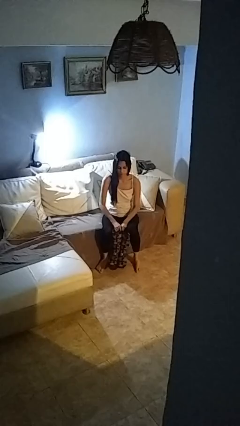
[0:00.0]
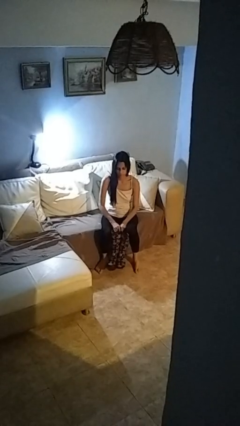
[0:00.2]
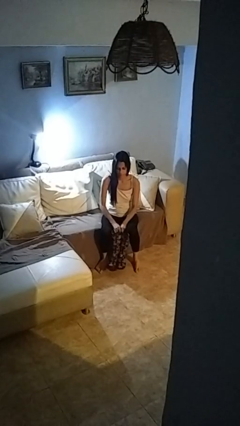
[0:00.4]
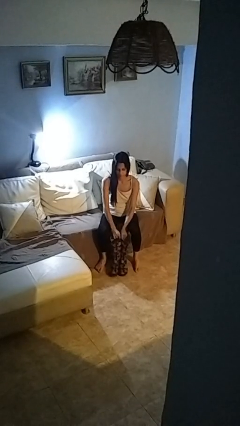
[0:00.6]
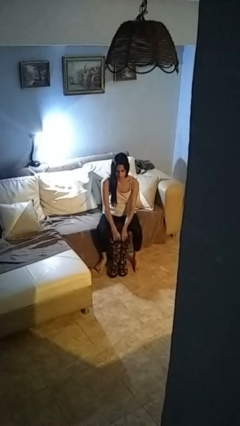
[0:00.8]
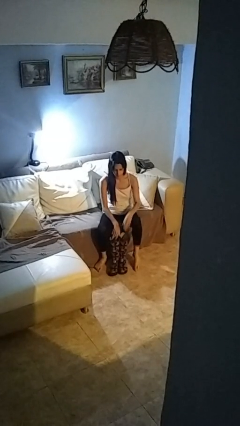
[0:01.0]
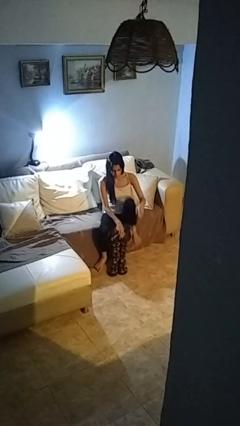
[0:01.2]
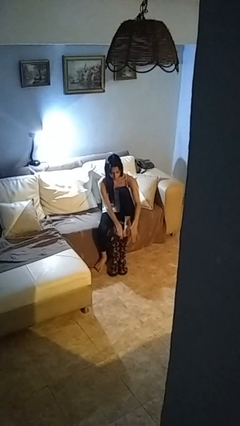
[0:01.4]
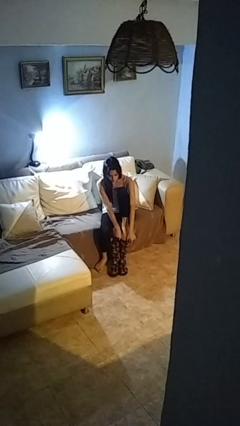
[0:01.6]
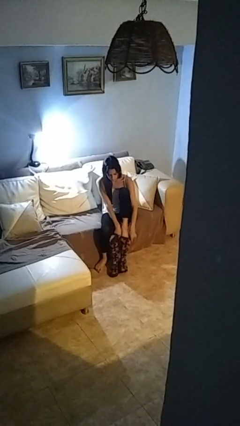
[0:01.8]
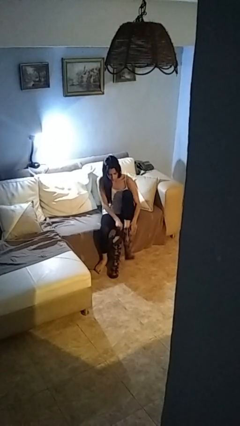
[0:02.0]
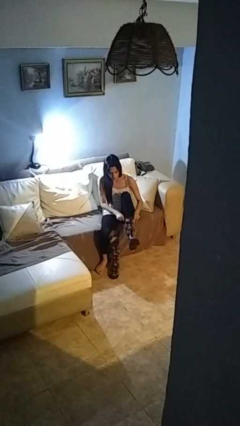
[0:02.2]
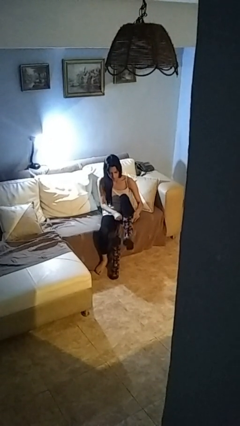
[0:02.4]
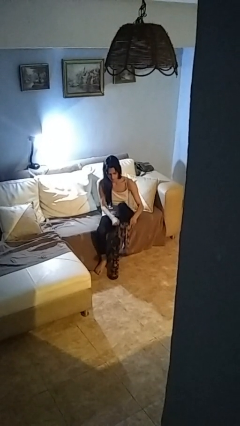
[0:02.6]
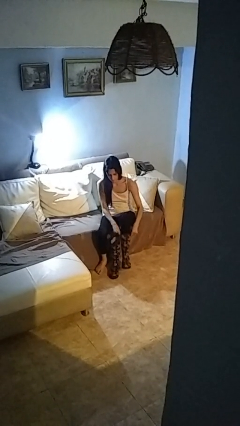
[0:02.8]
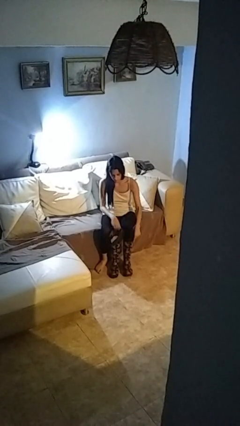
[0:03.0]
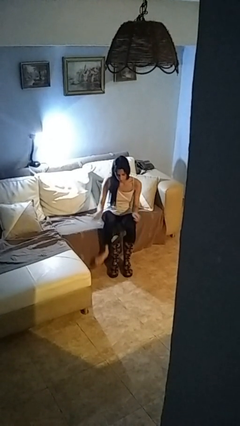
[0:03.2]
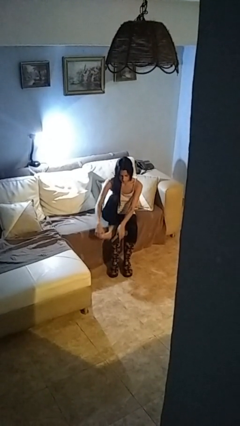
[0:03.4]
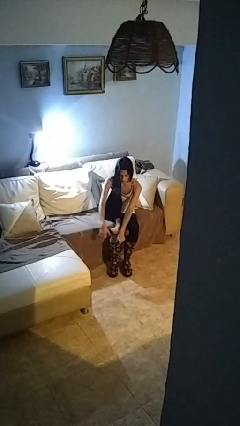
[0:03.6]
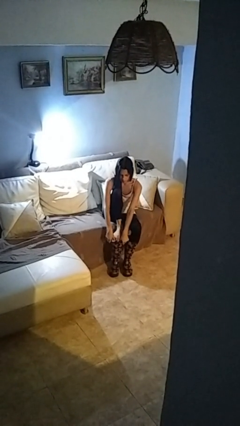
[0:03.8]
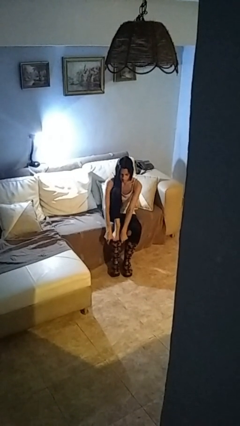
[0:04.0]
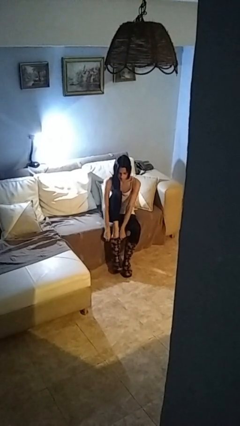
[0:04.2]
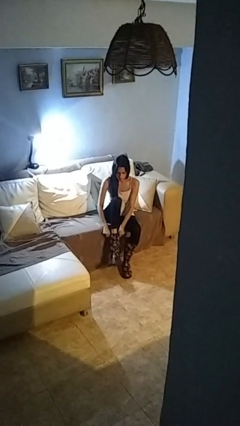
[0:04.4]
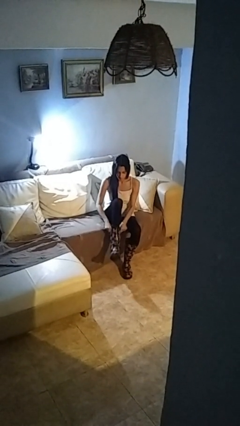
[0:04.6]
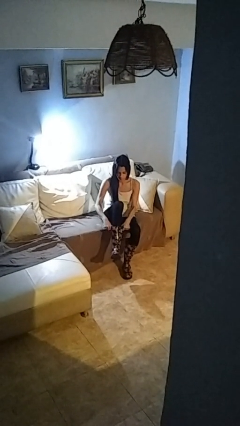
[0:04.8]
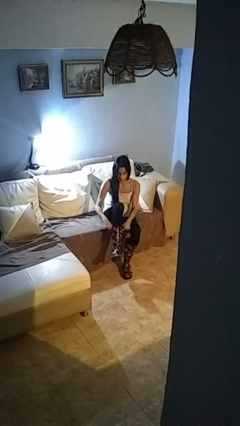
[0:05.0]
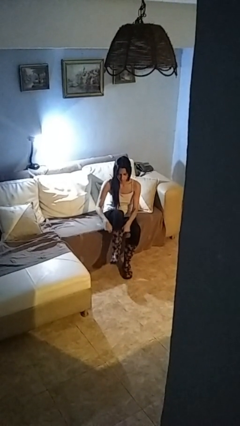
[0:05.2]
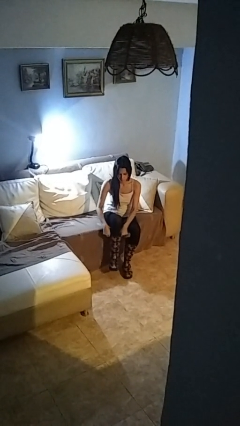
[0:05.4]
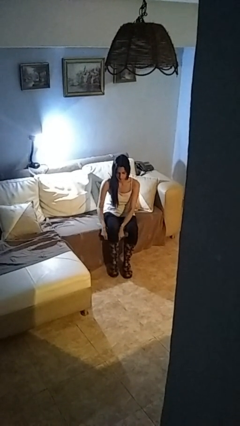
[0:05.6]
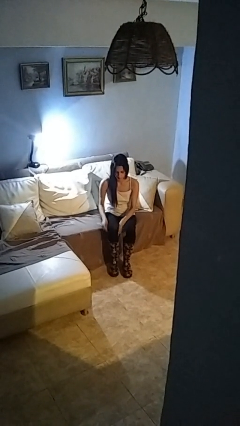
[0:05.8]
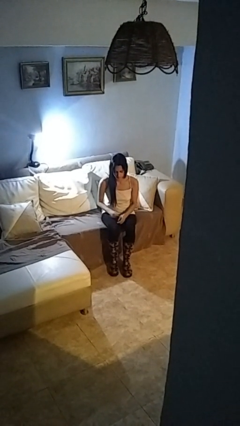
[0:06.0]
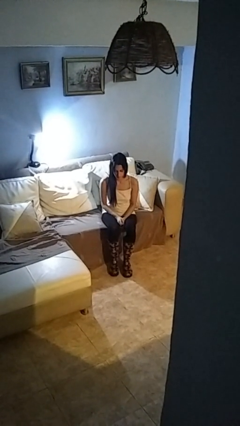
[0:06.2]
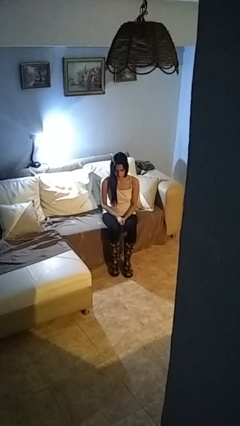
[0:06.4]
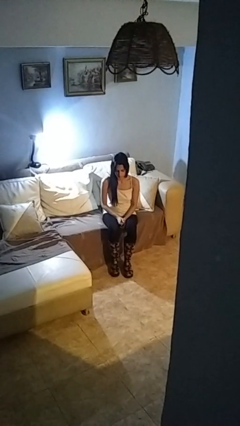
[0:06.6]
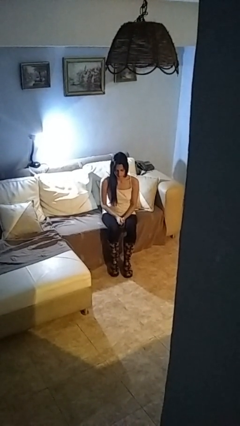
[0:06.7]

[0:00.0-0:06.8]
person puts on boots

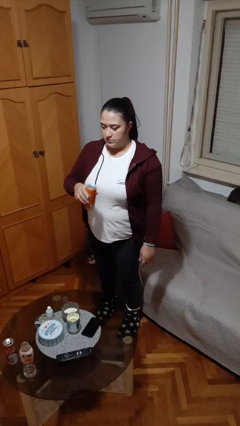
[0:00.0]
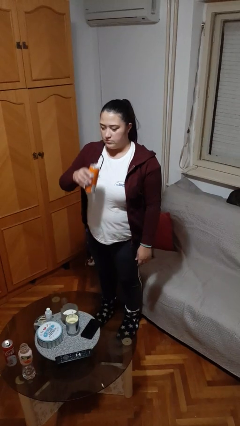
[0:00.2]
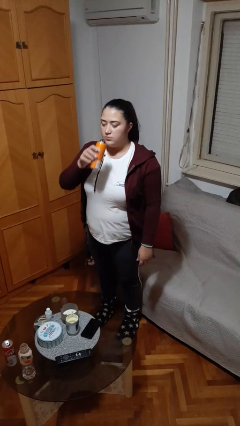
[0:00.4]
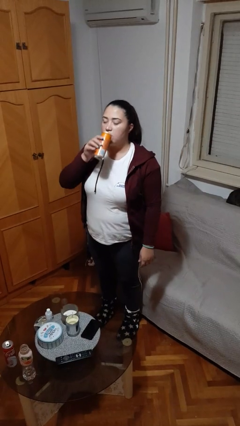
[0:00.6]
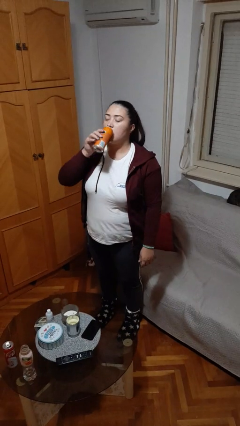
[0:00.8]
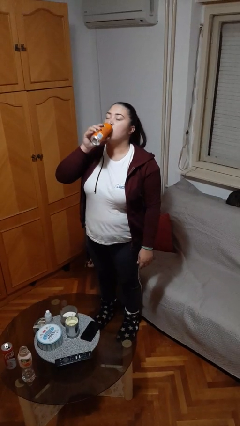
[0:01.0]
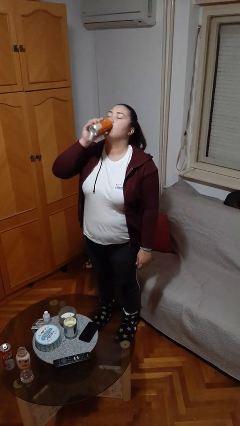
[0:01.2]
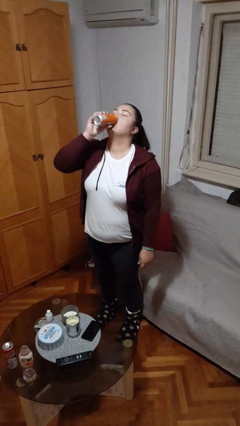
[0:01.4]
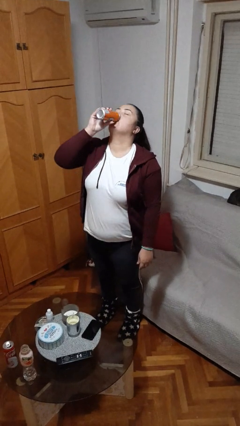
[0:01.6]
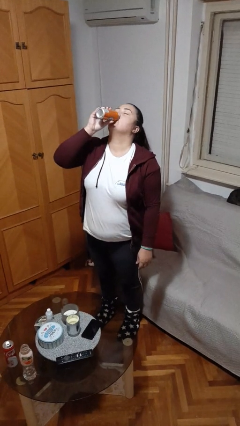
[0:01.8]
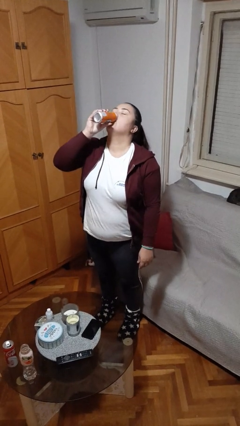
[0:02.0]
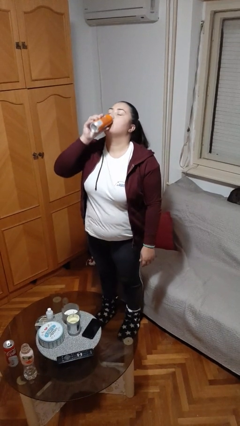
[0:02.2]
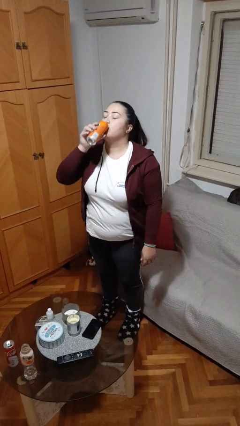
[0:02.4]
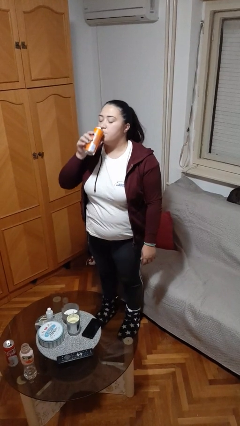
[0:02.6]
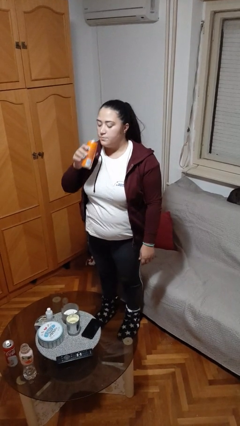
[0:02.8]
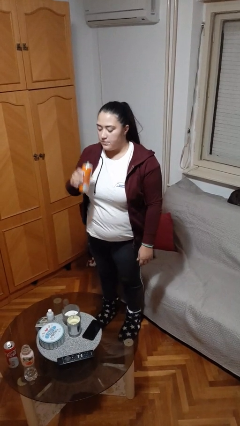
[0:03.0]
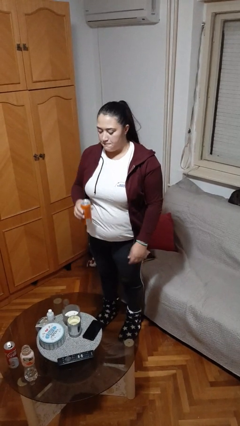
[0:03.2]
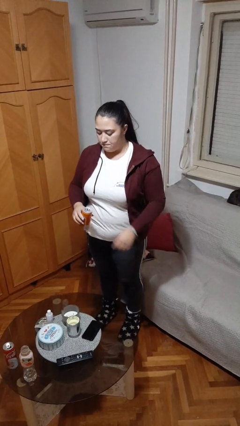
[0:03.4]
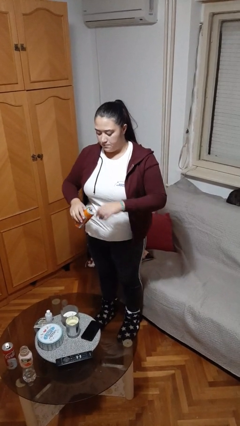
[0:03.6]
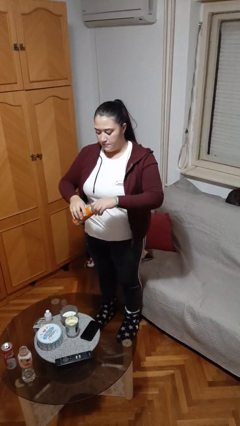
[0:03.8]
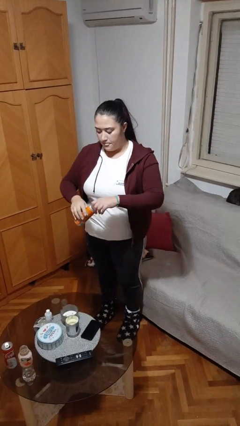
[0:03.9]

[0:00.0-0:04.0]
person drinks from beverage can

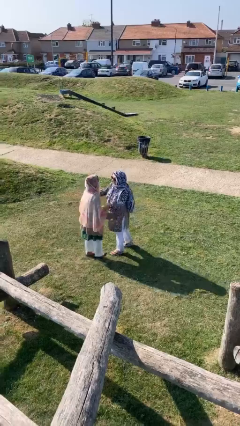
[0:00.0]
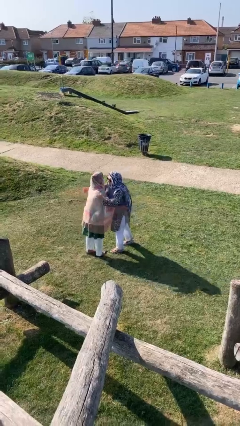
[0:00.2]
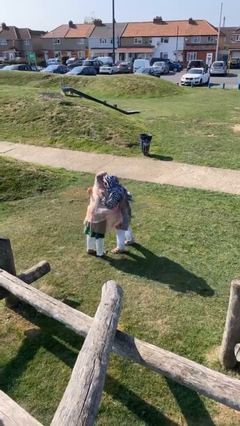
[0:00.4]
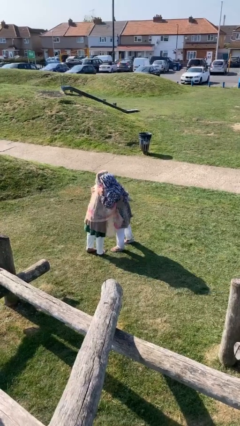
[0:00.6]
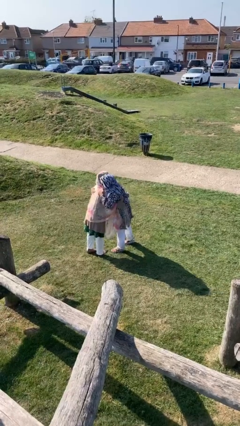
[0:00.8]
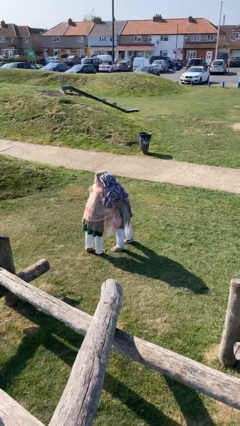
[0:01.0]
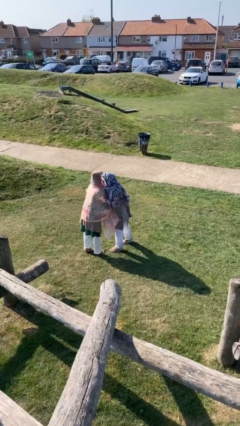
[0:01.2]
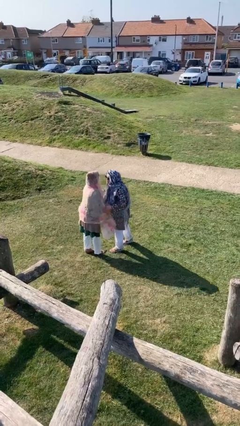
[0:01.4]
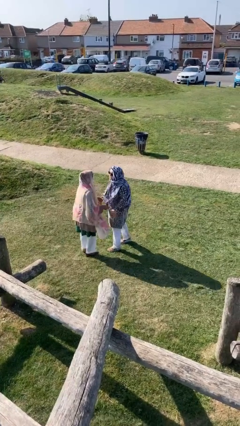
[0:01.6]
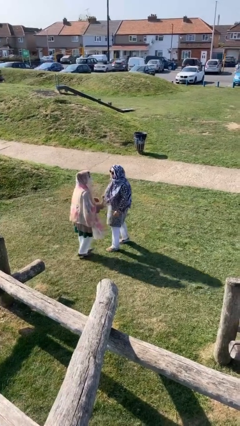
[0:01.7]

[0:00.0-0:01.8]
person embraces person

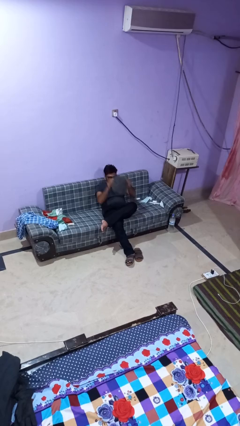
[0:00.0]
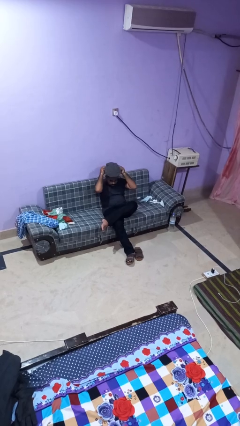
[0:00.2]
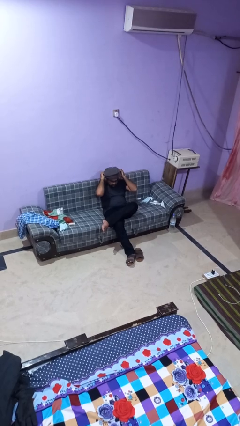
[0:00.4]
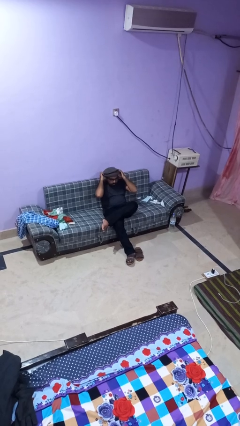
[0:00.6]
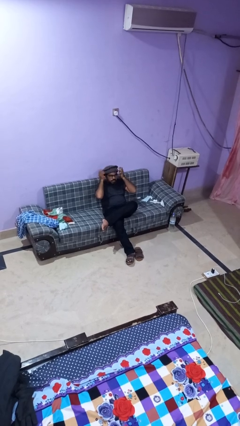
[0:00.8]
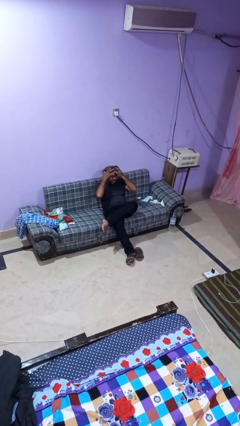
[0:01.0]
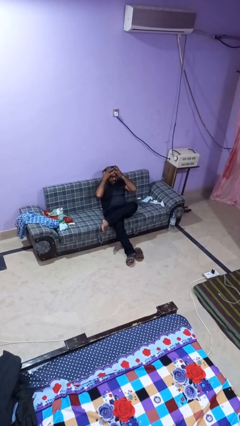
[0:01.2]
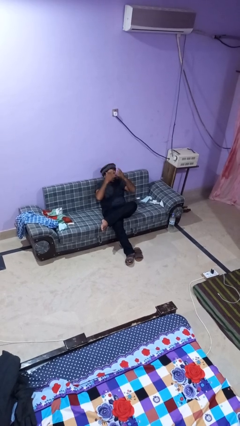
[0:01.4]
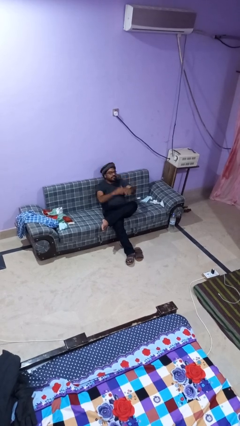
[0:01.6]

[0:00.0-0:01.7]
person puts on hat

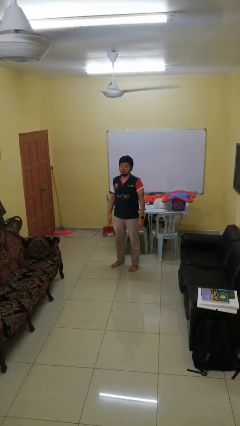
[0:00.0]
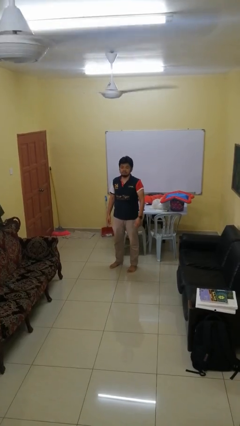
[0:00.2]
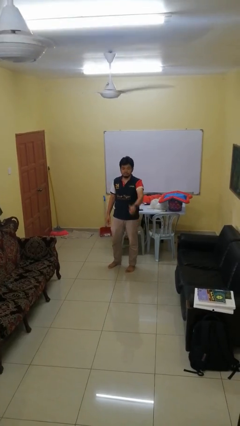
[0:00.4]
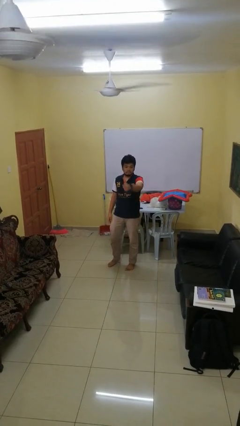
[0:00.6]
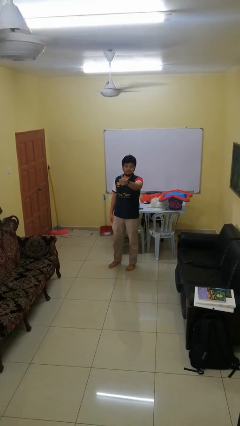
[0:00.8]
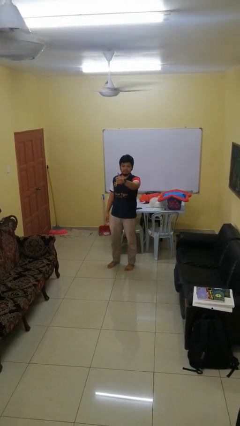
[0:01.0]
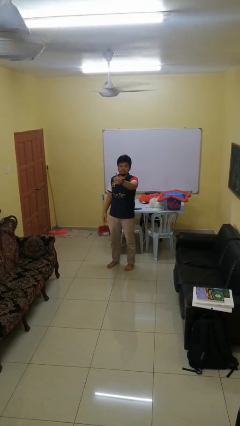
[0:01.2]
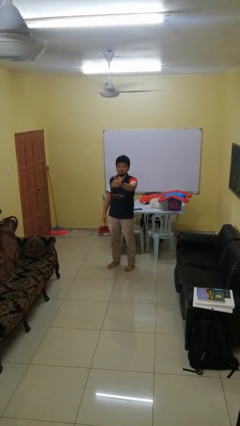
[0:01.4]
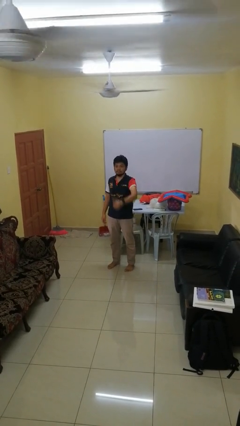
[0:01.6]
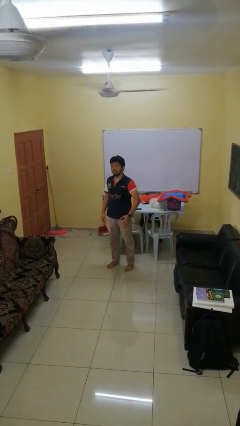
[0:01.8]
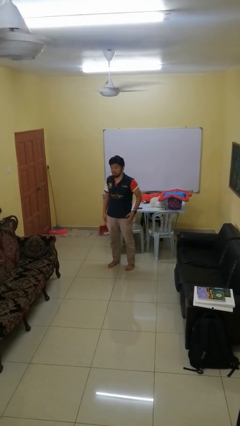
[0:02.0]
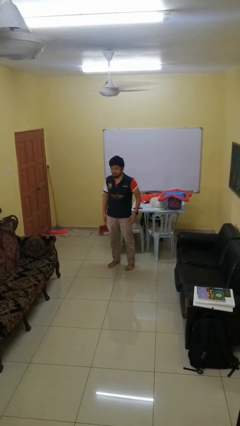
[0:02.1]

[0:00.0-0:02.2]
person gestures thumbs up

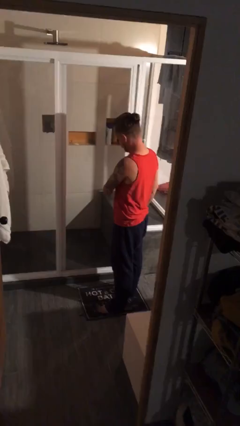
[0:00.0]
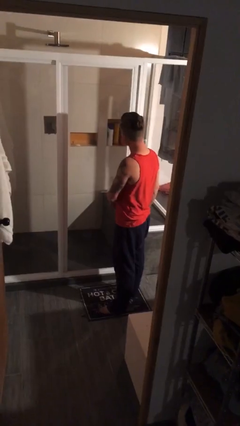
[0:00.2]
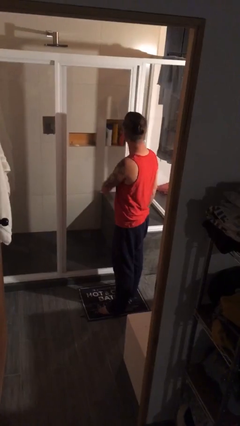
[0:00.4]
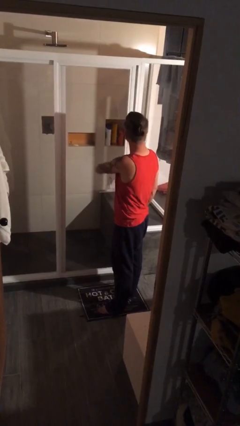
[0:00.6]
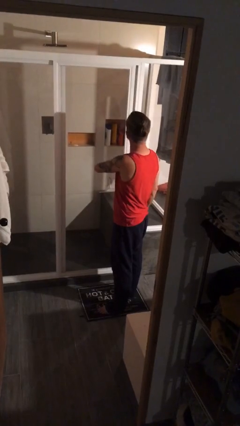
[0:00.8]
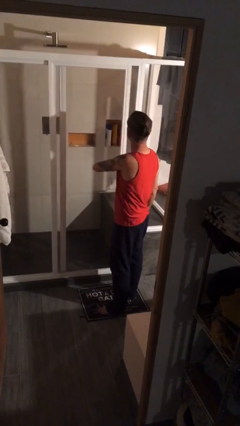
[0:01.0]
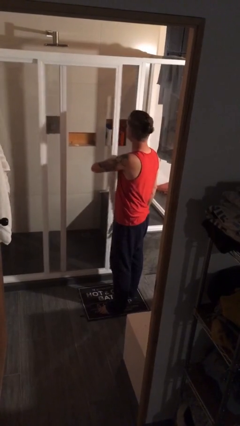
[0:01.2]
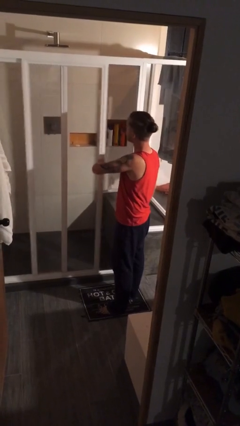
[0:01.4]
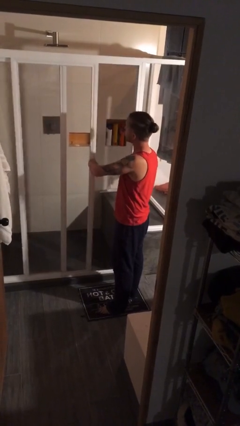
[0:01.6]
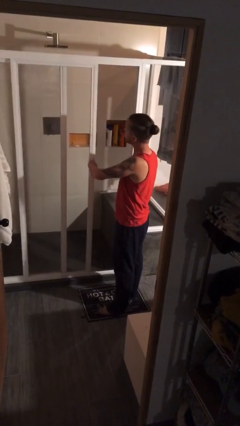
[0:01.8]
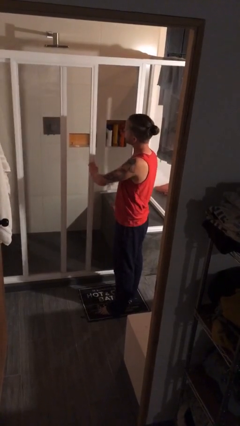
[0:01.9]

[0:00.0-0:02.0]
person opens sliding door
